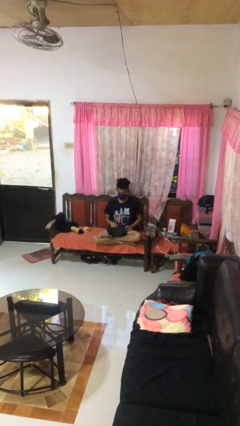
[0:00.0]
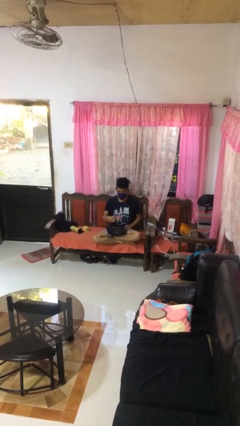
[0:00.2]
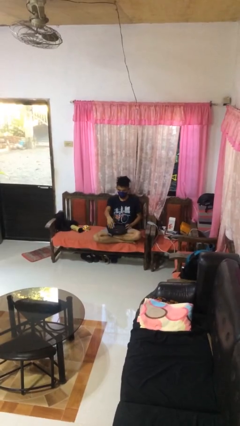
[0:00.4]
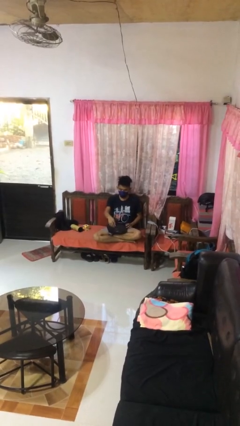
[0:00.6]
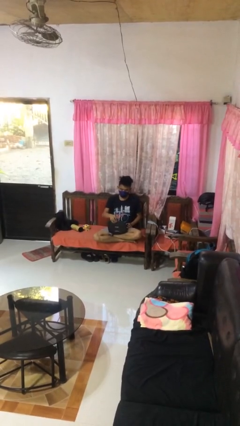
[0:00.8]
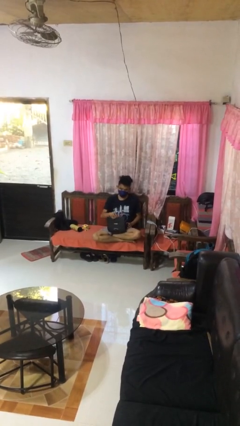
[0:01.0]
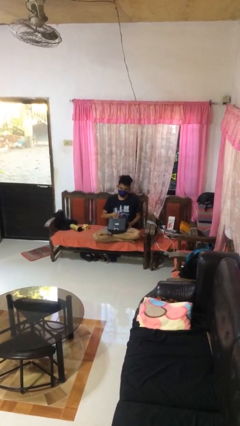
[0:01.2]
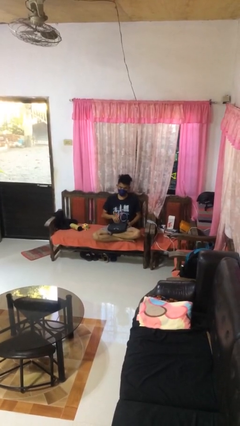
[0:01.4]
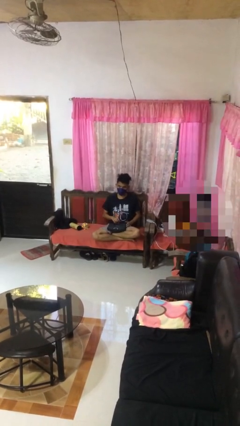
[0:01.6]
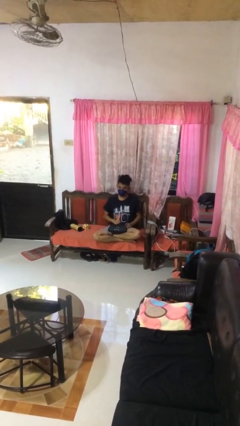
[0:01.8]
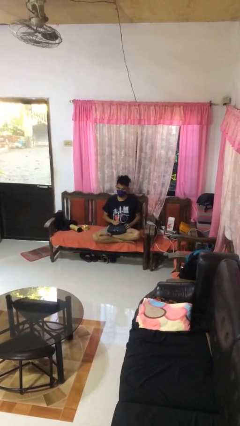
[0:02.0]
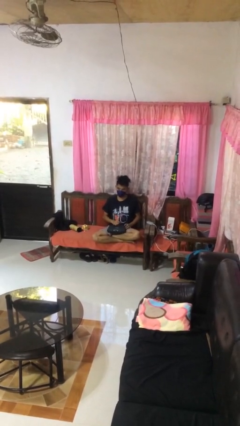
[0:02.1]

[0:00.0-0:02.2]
person closes laptop

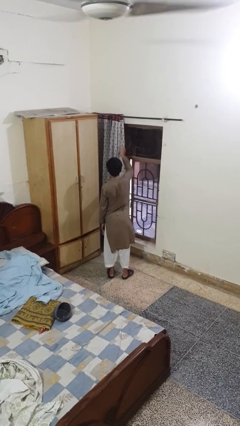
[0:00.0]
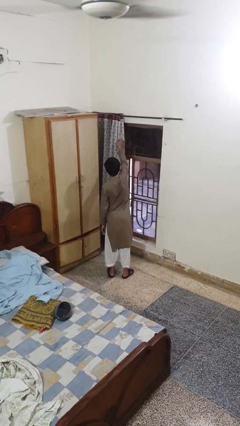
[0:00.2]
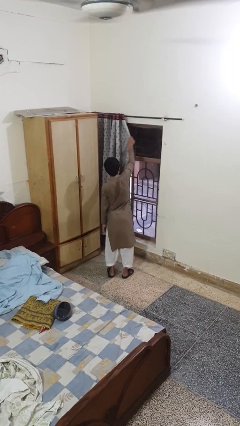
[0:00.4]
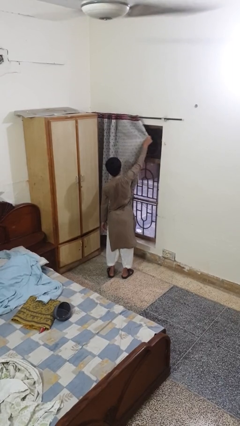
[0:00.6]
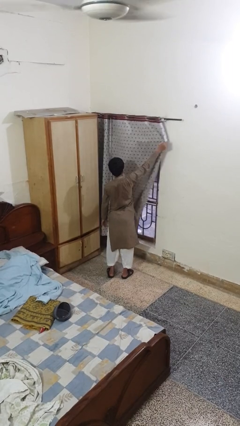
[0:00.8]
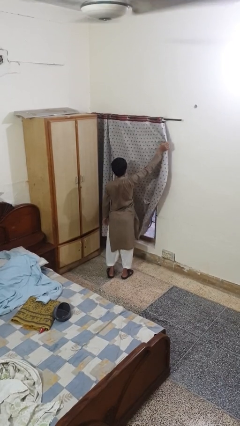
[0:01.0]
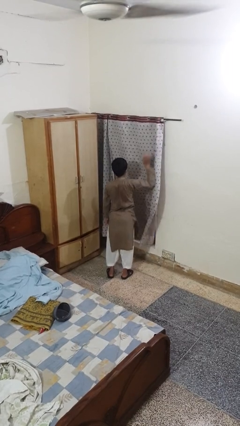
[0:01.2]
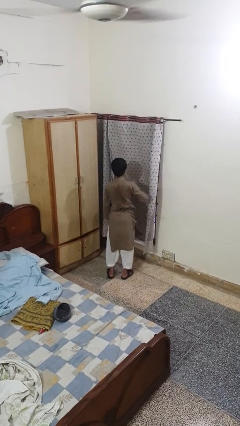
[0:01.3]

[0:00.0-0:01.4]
person closes curtains

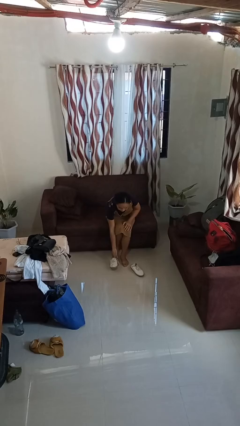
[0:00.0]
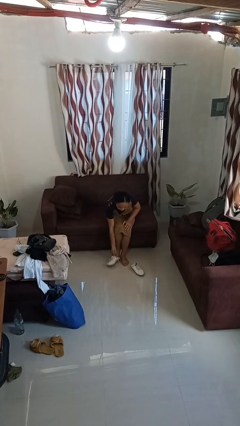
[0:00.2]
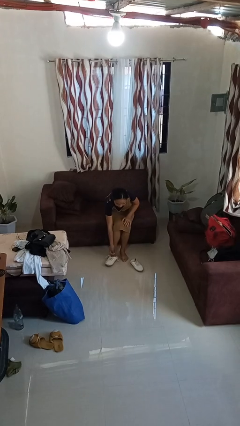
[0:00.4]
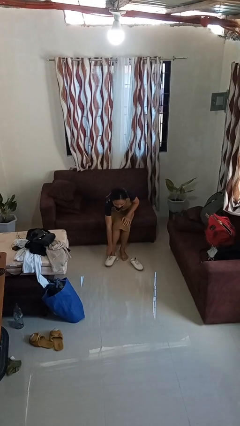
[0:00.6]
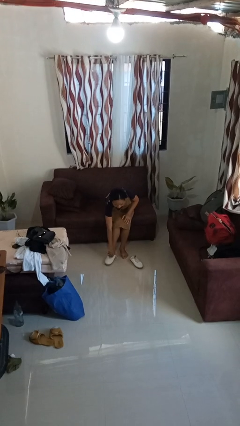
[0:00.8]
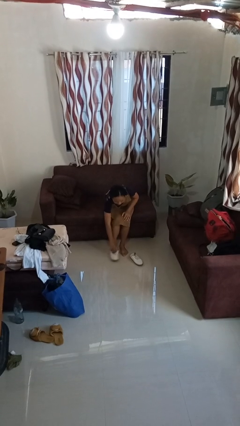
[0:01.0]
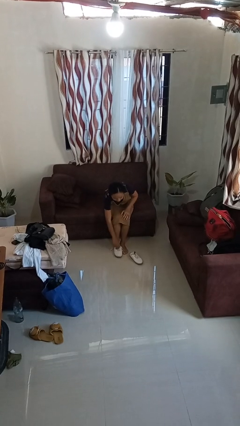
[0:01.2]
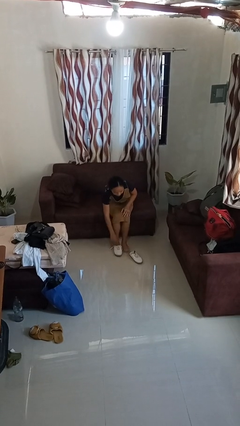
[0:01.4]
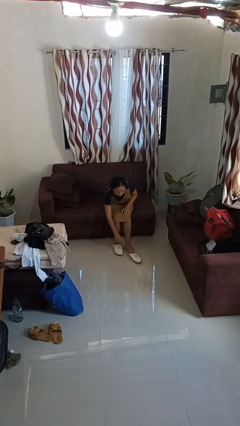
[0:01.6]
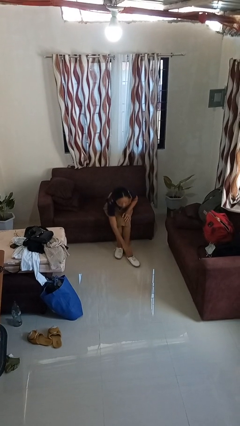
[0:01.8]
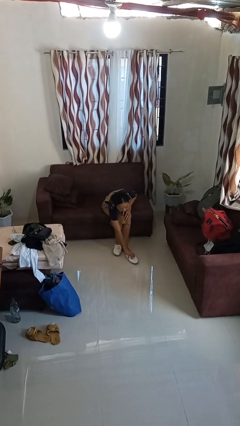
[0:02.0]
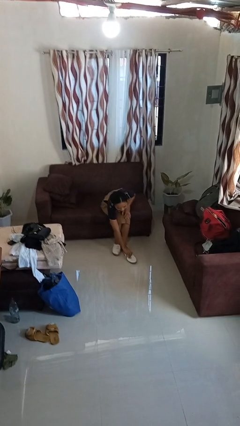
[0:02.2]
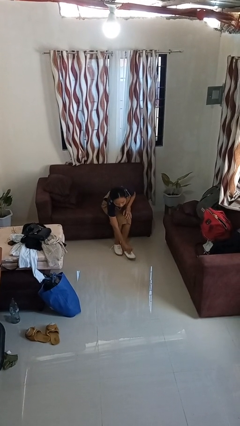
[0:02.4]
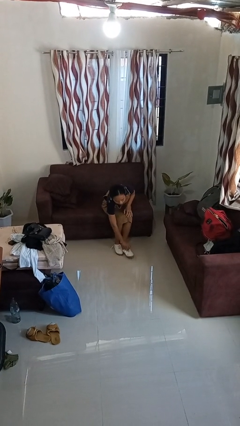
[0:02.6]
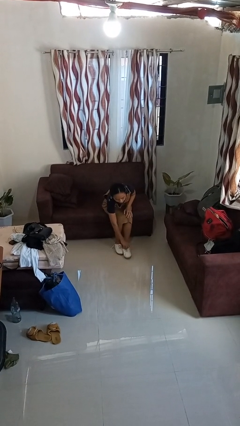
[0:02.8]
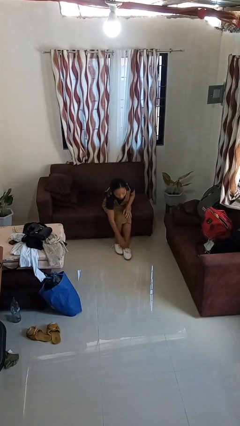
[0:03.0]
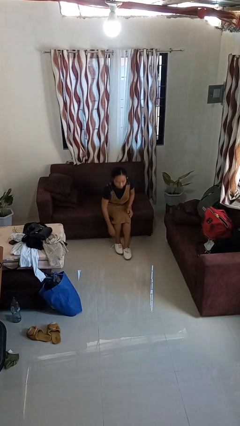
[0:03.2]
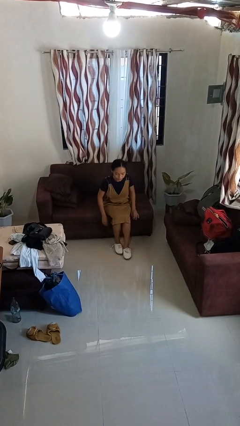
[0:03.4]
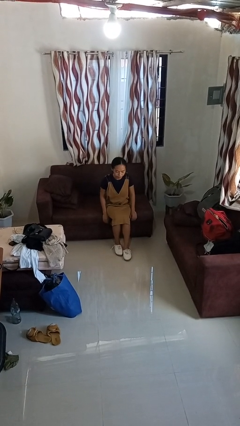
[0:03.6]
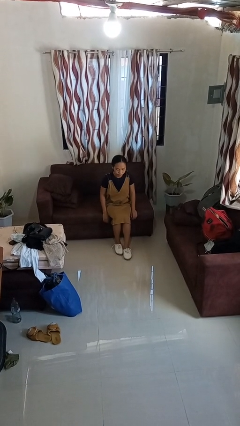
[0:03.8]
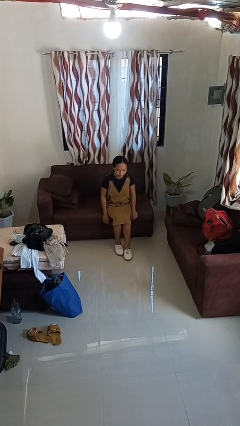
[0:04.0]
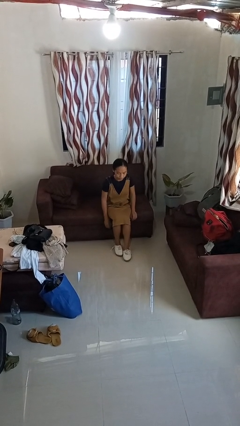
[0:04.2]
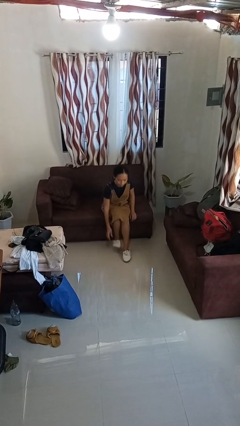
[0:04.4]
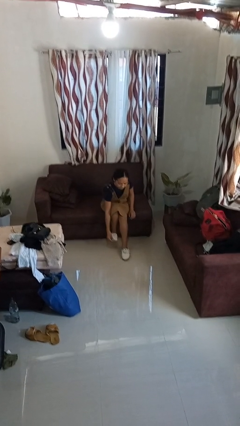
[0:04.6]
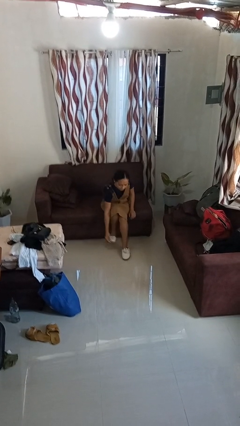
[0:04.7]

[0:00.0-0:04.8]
person puts on shoes

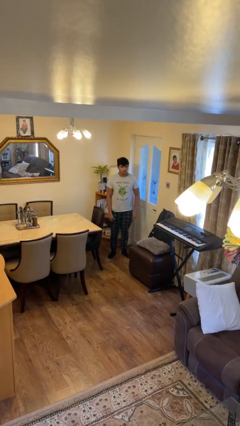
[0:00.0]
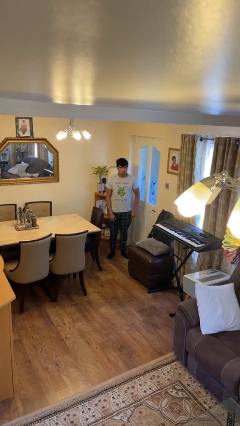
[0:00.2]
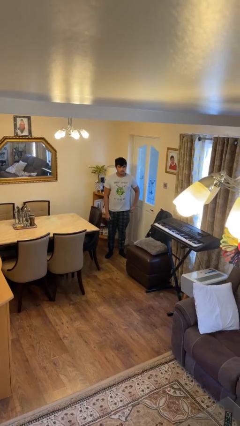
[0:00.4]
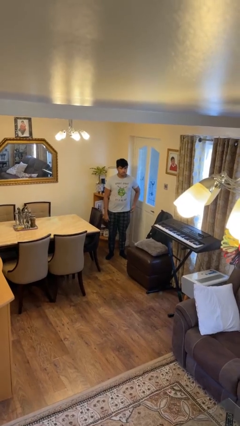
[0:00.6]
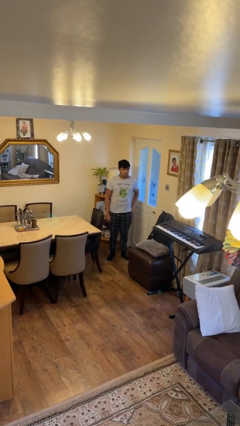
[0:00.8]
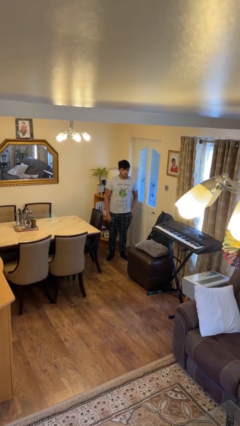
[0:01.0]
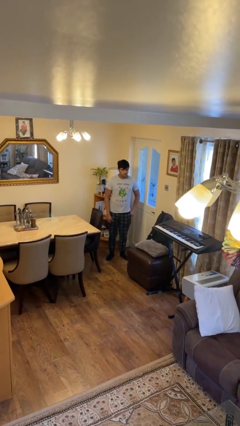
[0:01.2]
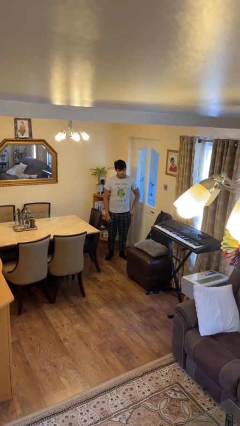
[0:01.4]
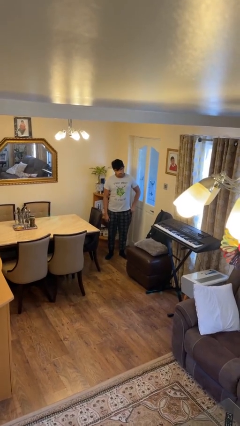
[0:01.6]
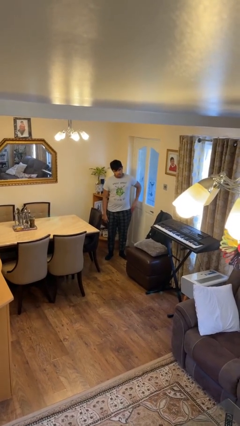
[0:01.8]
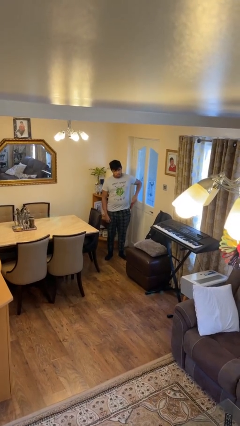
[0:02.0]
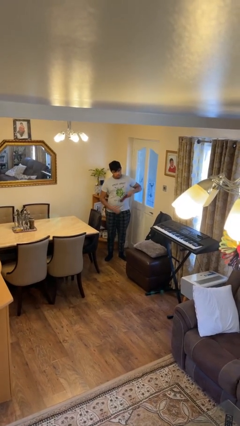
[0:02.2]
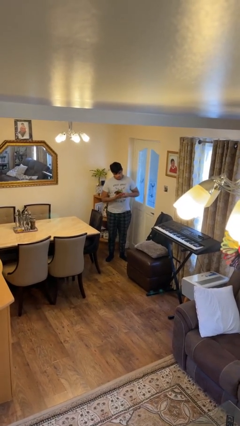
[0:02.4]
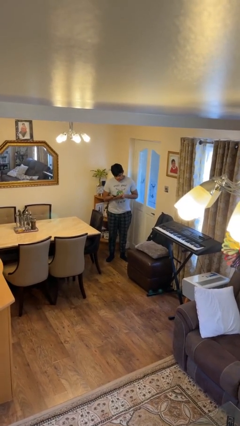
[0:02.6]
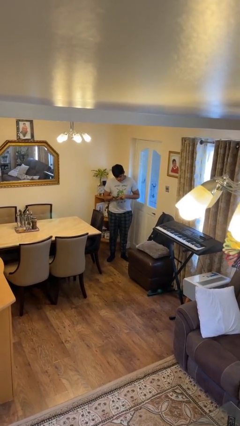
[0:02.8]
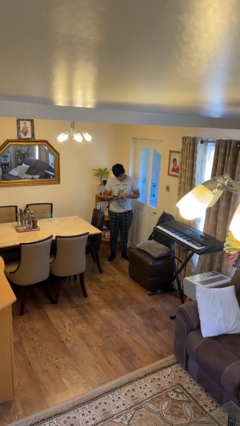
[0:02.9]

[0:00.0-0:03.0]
person takes phone from pocket

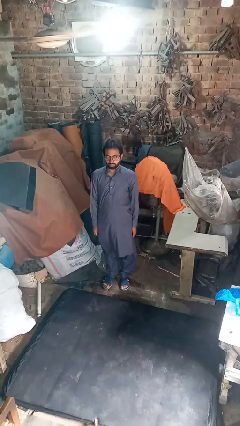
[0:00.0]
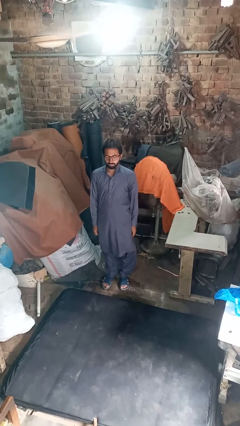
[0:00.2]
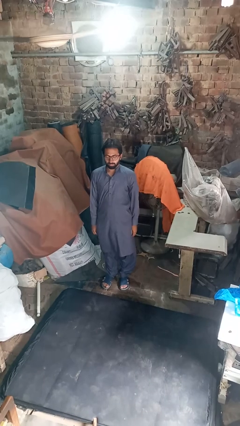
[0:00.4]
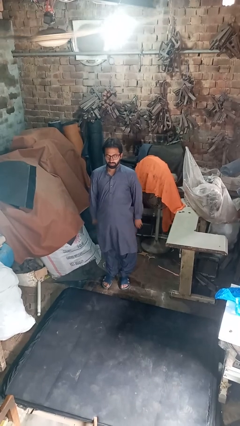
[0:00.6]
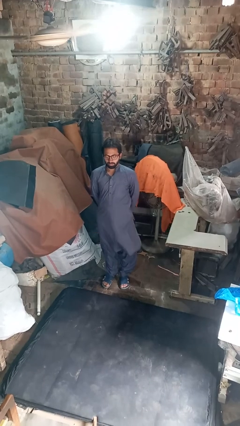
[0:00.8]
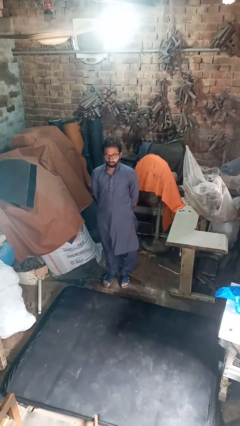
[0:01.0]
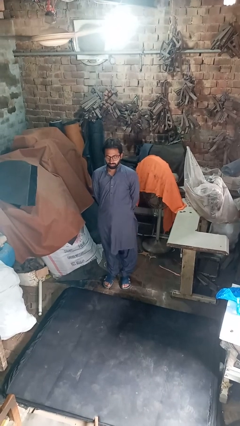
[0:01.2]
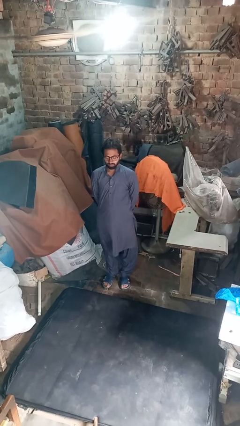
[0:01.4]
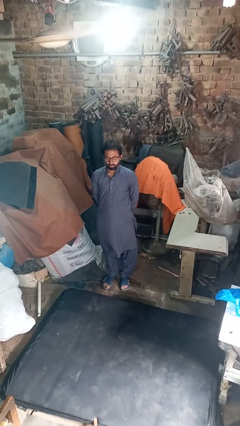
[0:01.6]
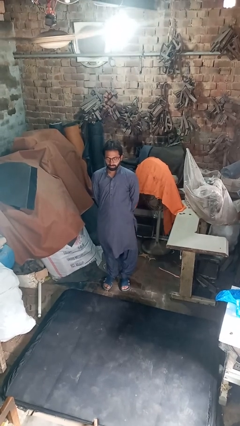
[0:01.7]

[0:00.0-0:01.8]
person stretches back

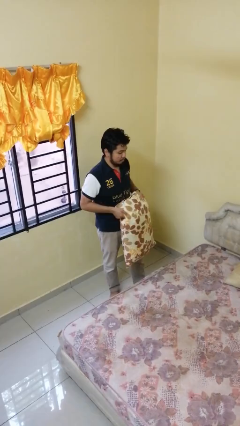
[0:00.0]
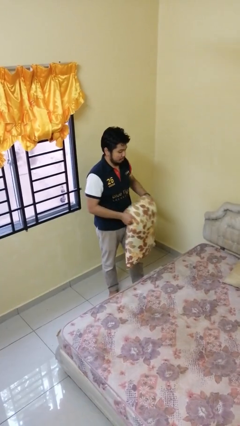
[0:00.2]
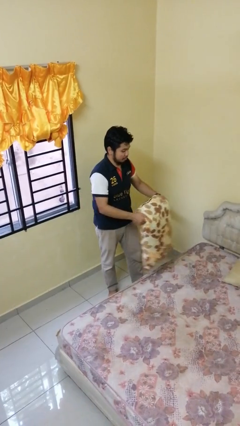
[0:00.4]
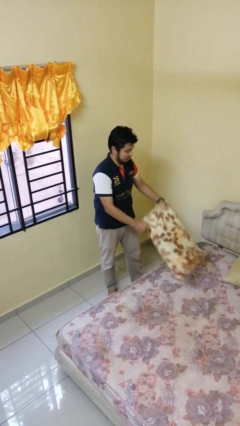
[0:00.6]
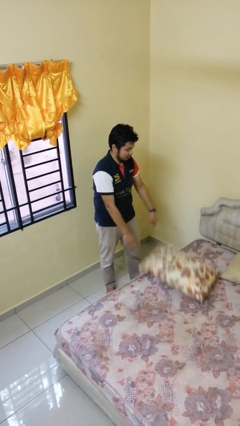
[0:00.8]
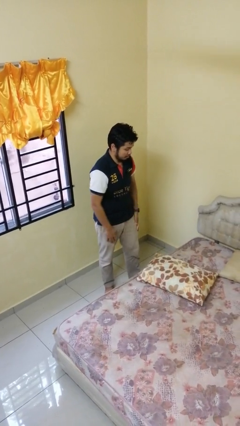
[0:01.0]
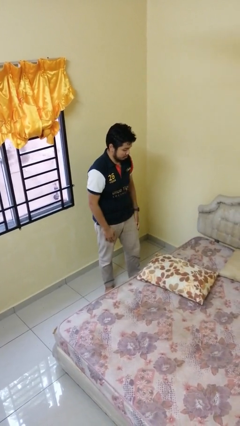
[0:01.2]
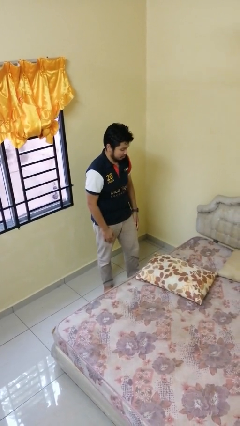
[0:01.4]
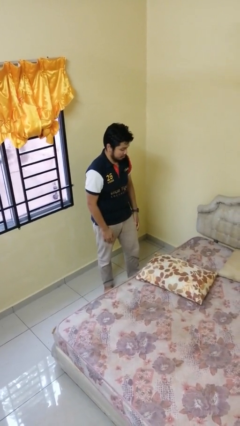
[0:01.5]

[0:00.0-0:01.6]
person puts down object on bed

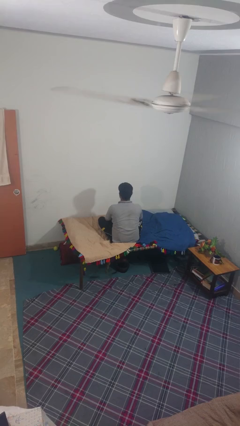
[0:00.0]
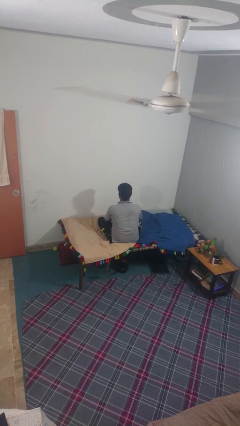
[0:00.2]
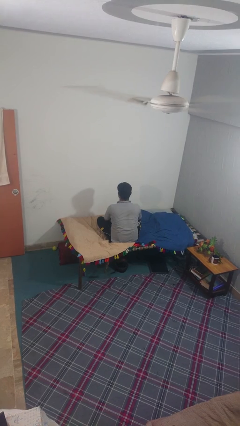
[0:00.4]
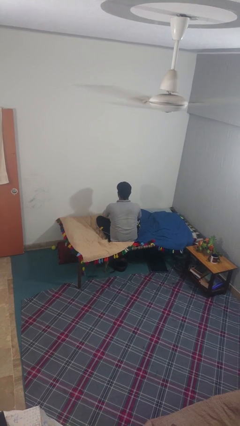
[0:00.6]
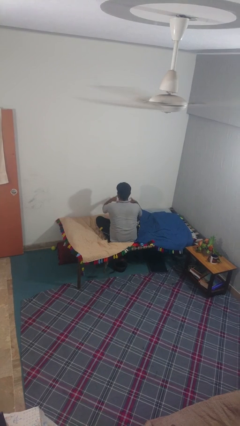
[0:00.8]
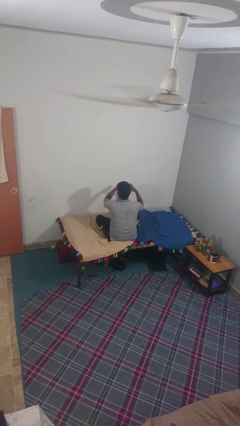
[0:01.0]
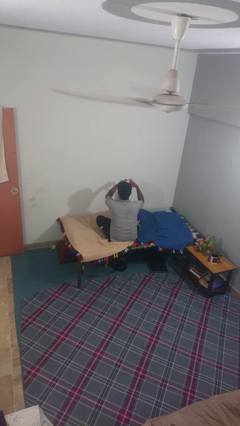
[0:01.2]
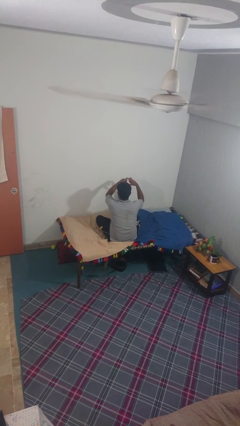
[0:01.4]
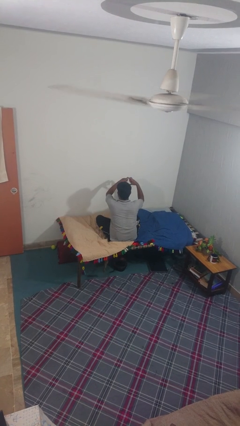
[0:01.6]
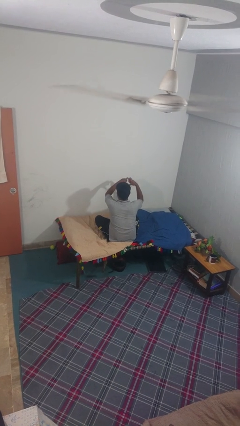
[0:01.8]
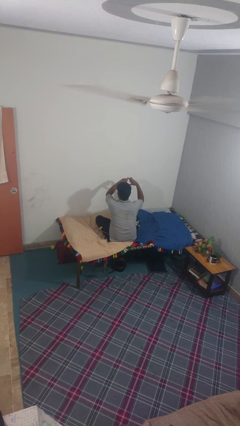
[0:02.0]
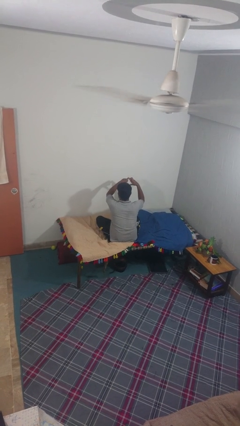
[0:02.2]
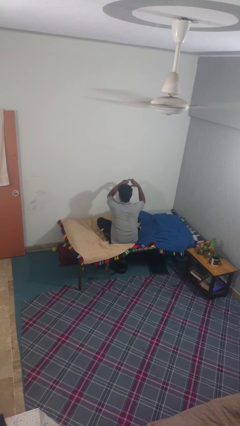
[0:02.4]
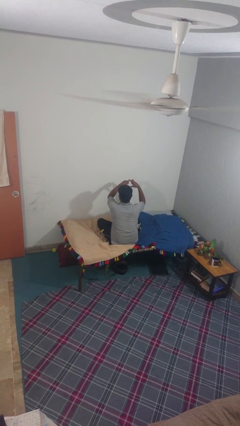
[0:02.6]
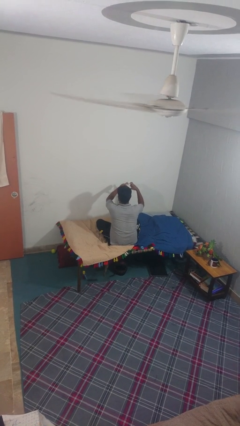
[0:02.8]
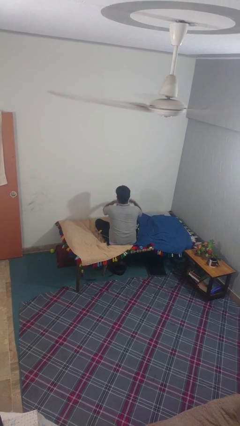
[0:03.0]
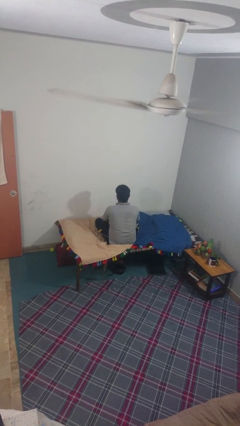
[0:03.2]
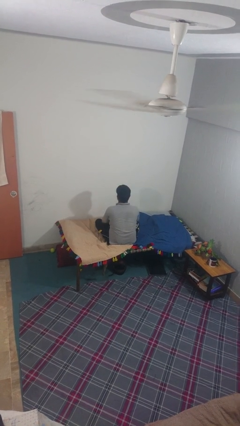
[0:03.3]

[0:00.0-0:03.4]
person gestures heart
